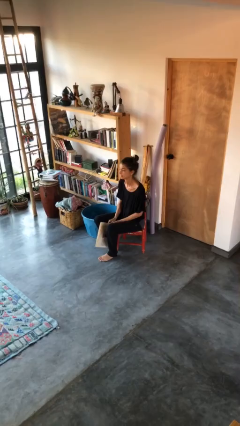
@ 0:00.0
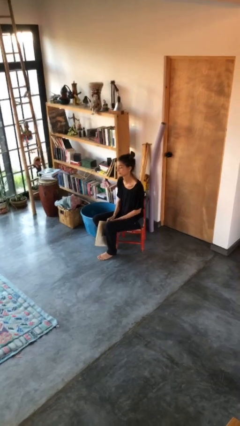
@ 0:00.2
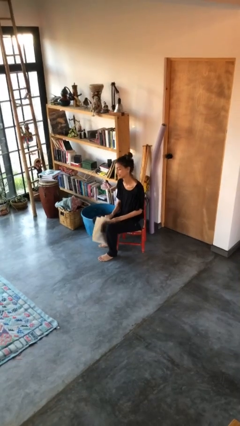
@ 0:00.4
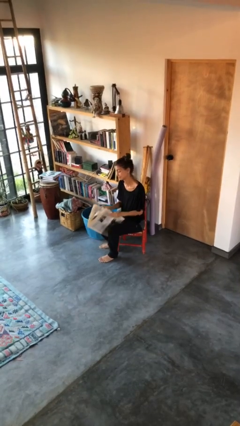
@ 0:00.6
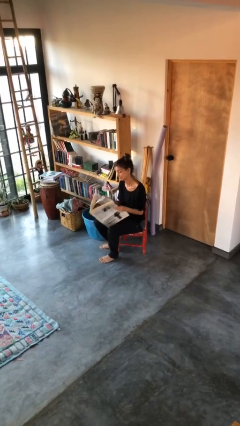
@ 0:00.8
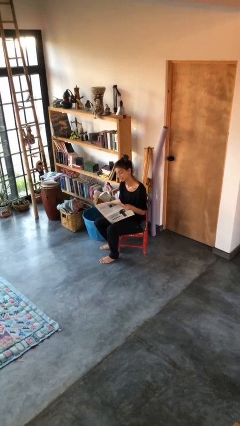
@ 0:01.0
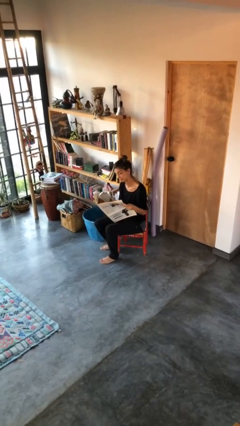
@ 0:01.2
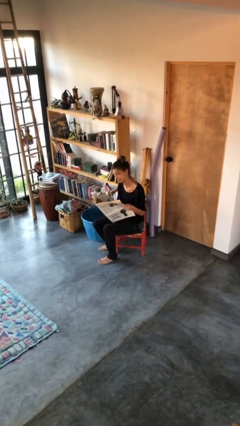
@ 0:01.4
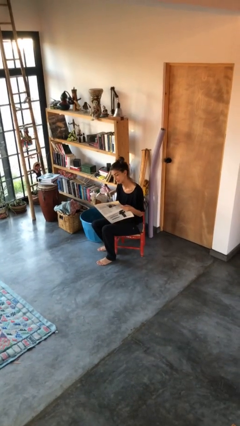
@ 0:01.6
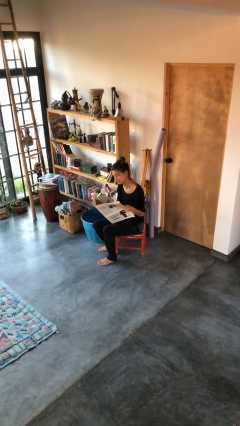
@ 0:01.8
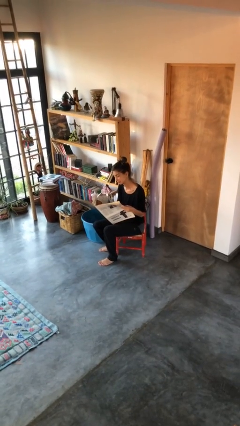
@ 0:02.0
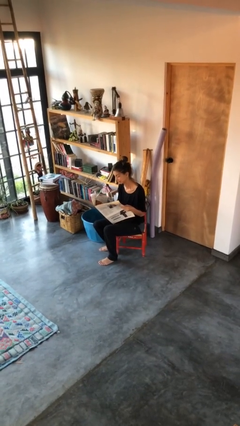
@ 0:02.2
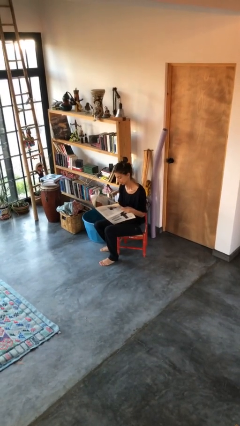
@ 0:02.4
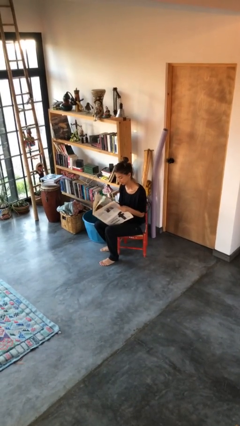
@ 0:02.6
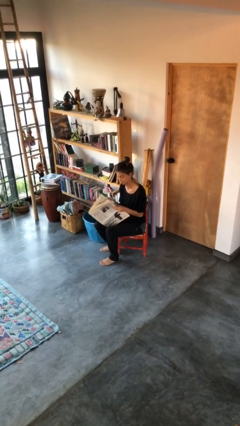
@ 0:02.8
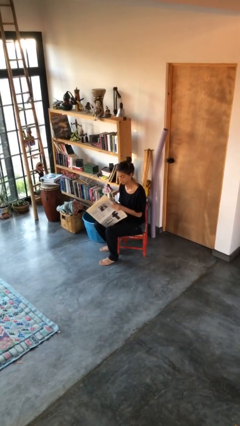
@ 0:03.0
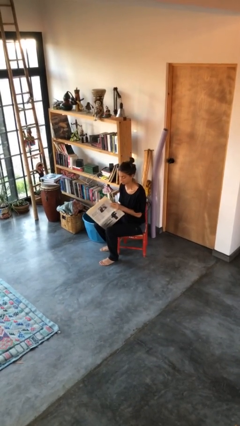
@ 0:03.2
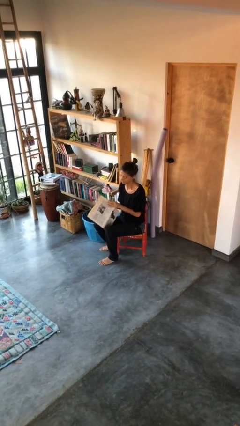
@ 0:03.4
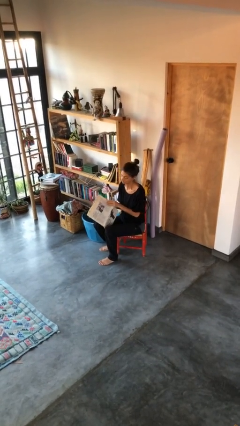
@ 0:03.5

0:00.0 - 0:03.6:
person reads newspaper

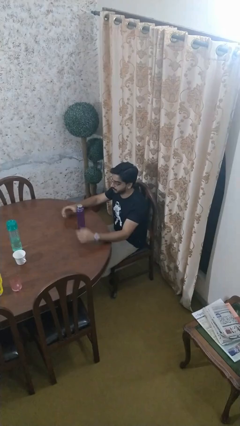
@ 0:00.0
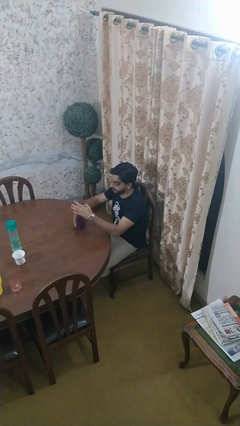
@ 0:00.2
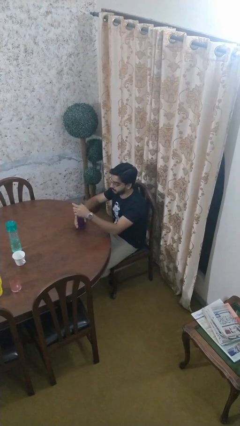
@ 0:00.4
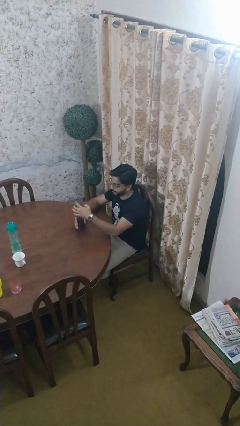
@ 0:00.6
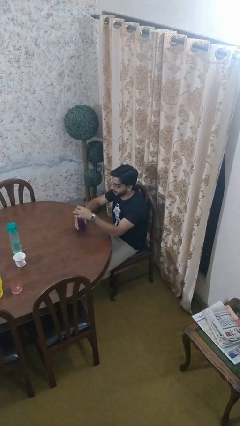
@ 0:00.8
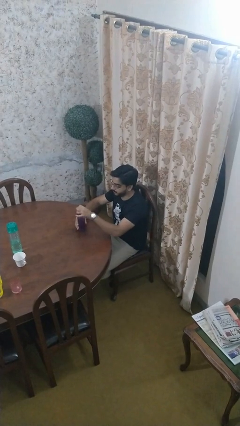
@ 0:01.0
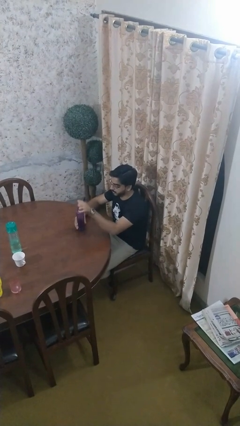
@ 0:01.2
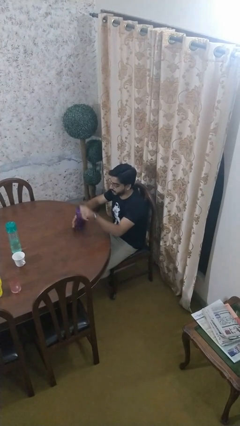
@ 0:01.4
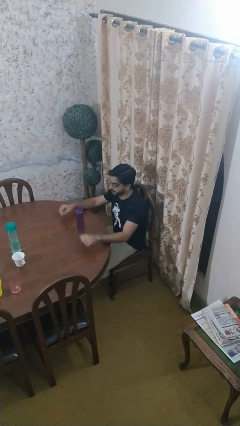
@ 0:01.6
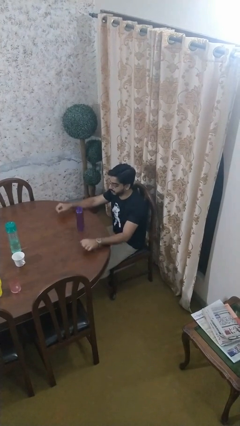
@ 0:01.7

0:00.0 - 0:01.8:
person unscrews lid from bottle

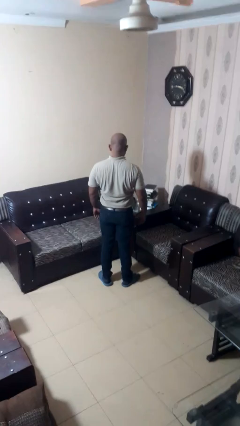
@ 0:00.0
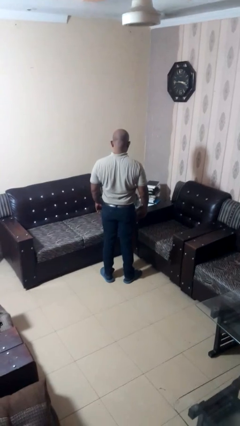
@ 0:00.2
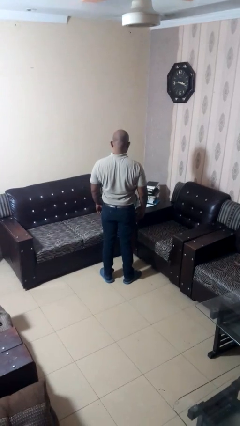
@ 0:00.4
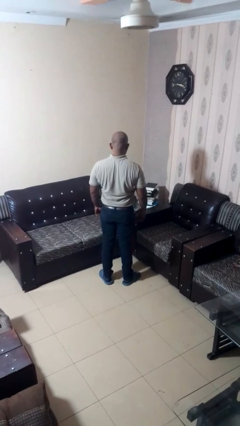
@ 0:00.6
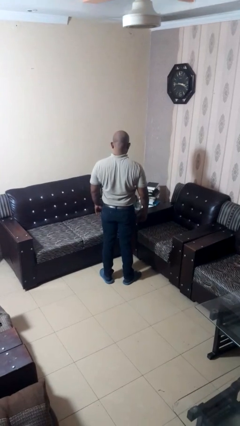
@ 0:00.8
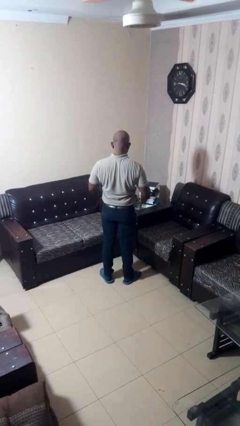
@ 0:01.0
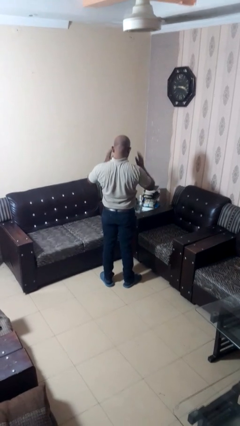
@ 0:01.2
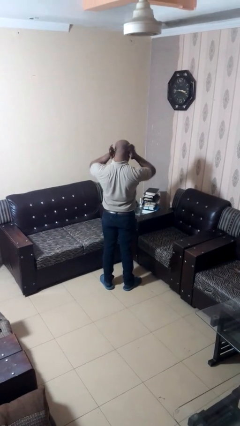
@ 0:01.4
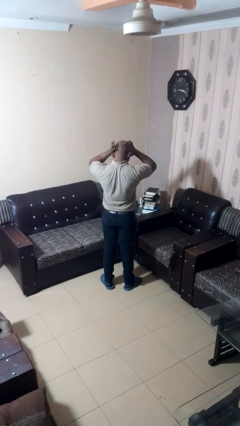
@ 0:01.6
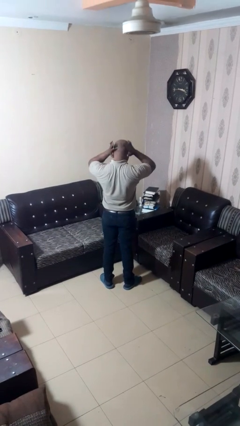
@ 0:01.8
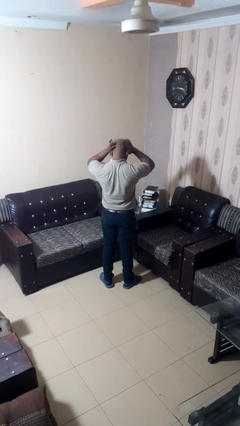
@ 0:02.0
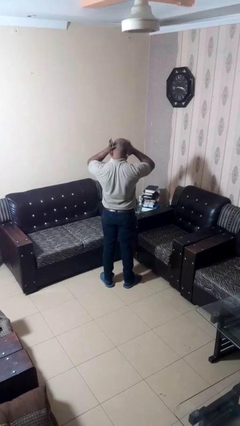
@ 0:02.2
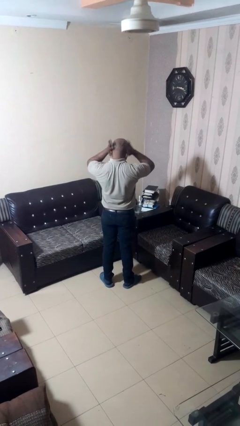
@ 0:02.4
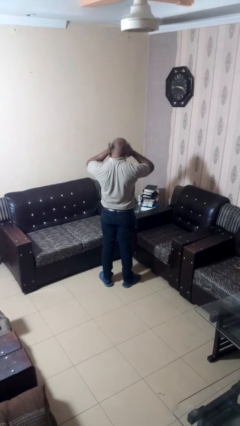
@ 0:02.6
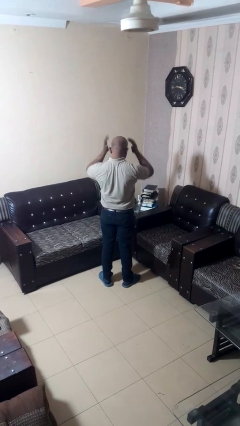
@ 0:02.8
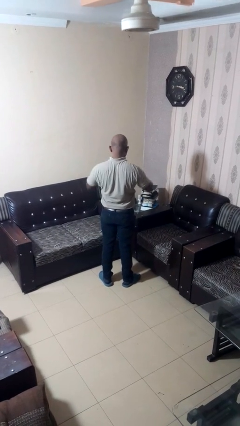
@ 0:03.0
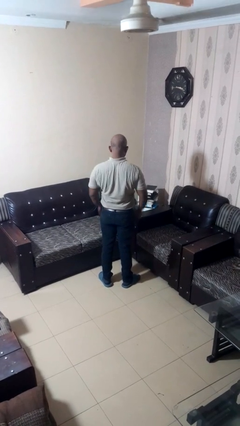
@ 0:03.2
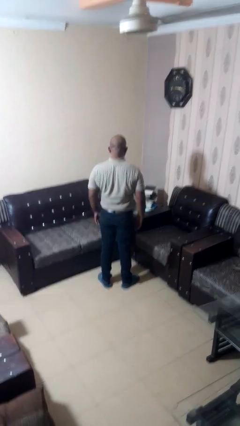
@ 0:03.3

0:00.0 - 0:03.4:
person touches earlobe

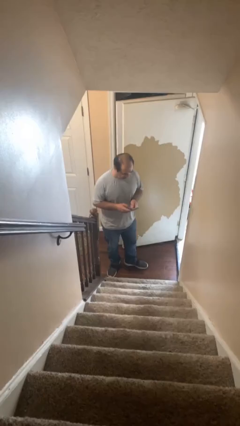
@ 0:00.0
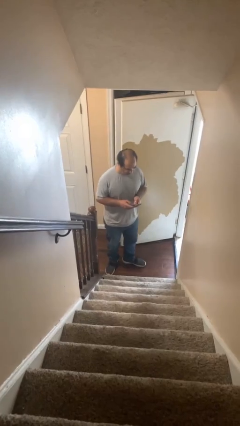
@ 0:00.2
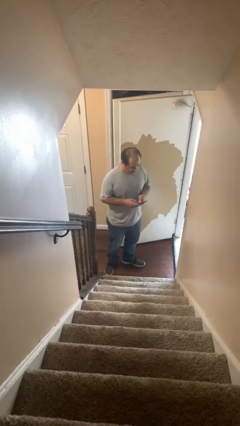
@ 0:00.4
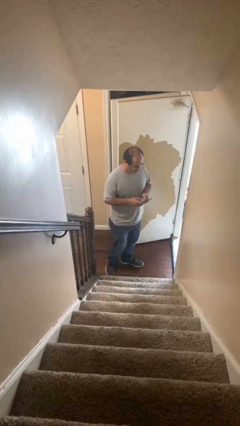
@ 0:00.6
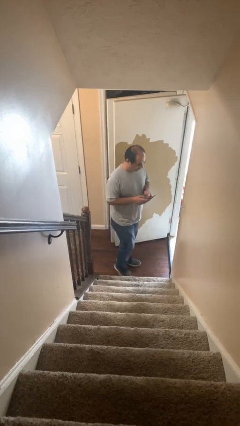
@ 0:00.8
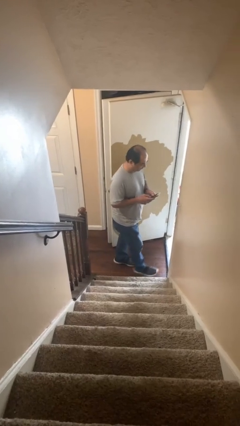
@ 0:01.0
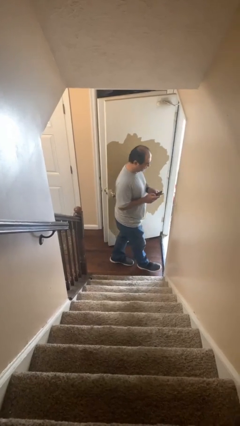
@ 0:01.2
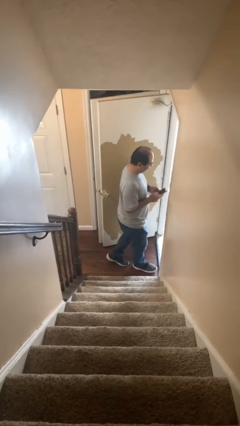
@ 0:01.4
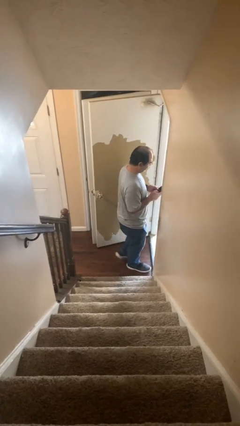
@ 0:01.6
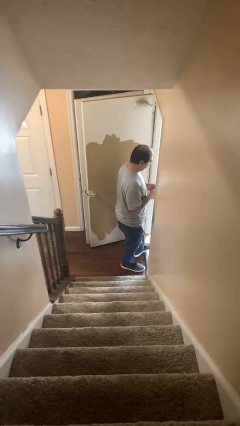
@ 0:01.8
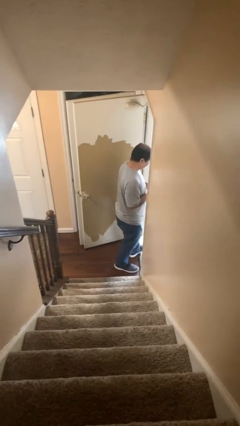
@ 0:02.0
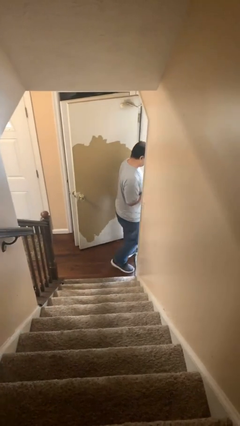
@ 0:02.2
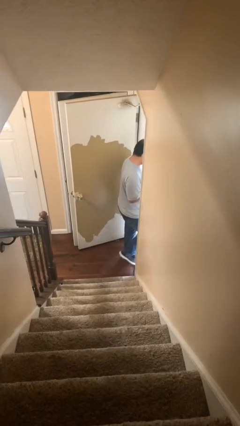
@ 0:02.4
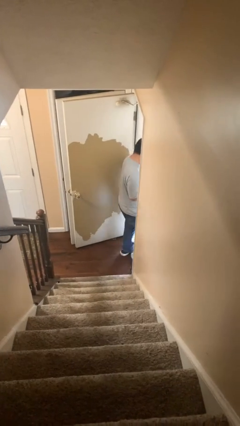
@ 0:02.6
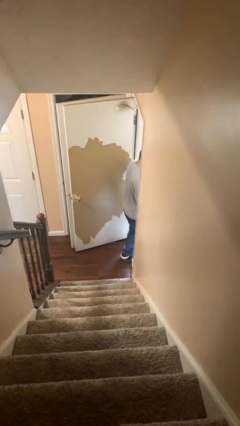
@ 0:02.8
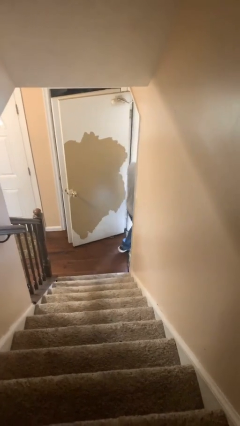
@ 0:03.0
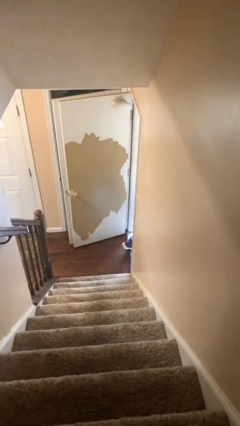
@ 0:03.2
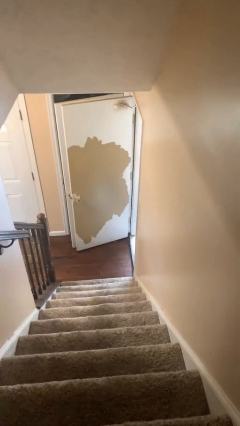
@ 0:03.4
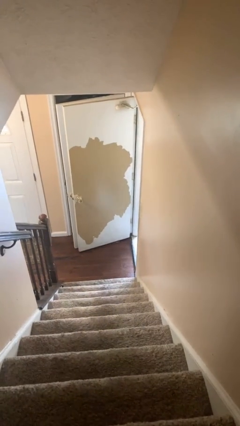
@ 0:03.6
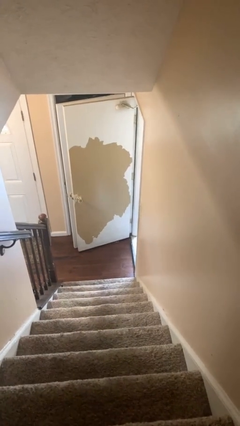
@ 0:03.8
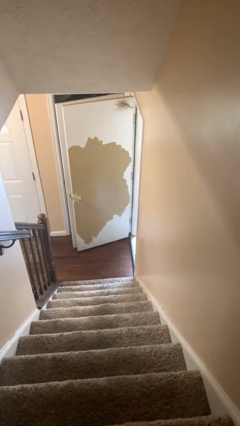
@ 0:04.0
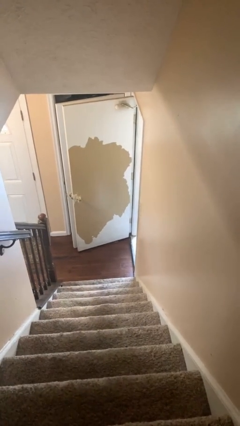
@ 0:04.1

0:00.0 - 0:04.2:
person exits scene through structure

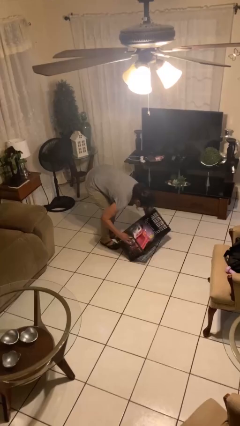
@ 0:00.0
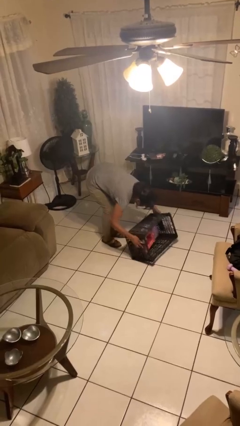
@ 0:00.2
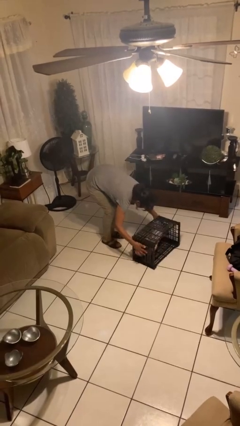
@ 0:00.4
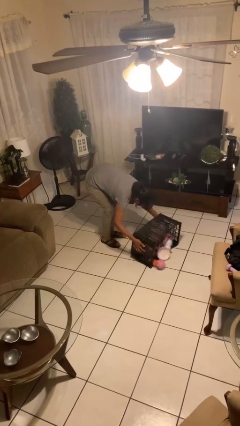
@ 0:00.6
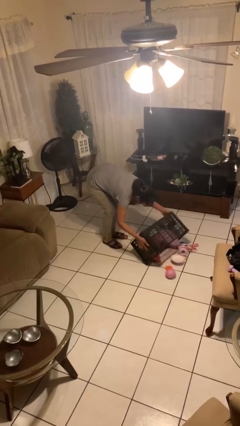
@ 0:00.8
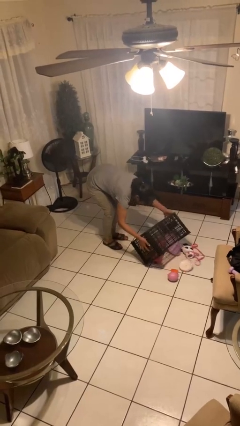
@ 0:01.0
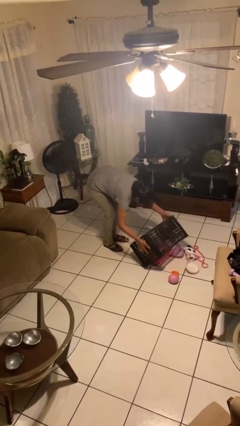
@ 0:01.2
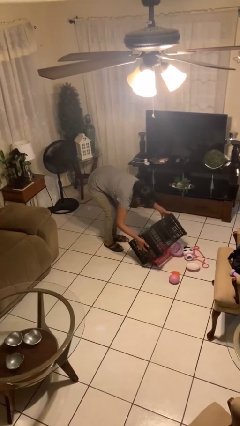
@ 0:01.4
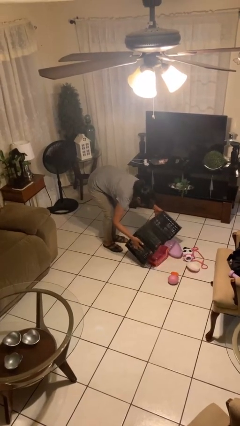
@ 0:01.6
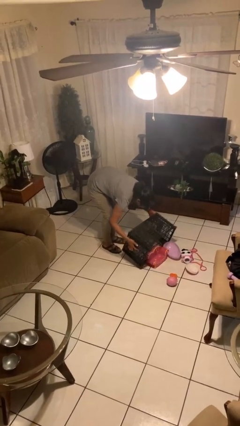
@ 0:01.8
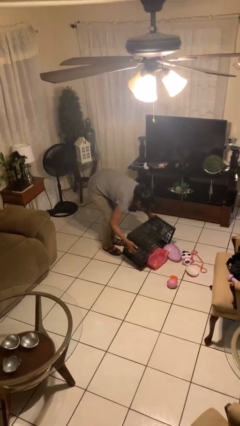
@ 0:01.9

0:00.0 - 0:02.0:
person unloads box onto floor

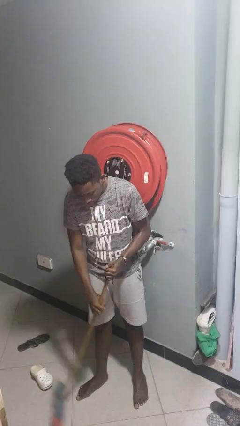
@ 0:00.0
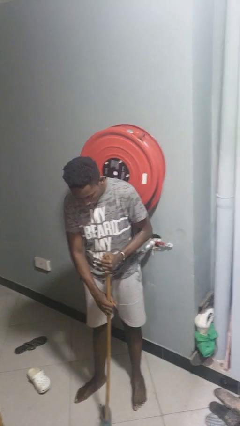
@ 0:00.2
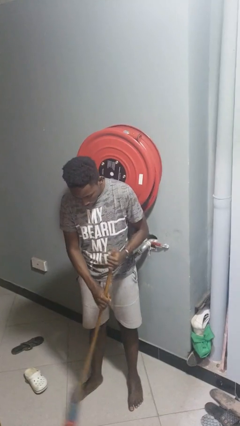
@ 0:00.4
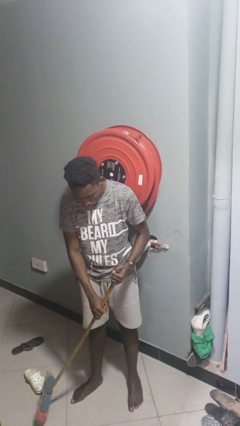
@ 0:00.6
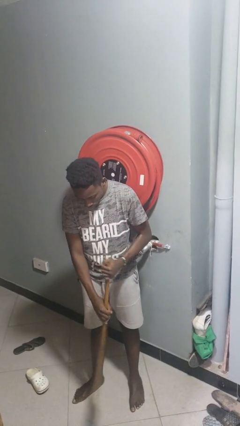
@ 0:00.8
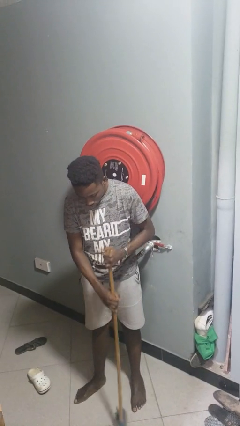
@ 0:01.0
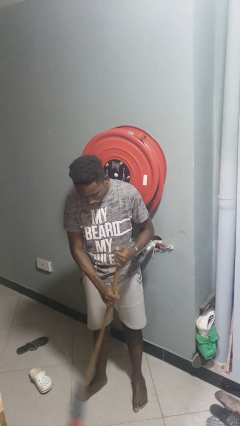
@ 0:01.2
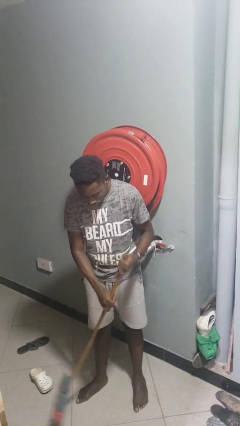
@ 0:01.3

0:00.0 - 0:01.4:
person sweeps floor

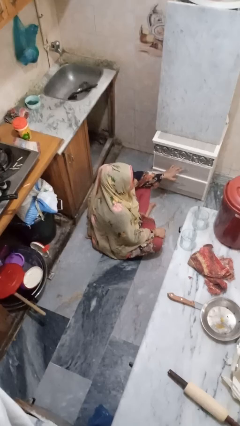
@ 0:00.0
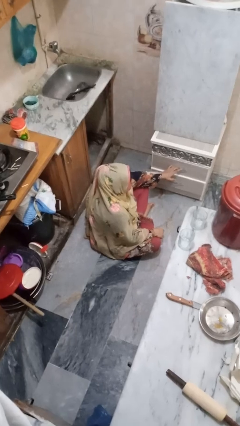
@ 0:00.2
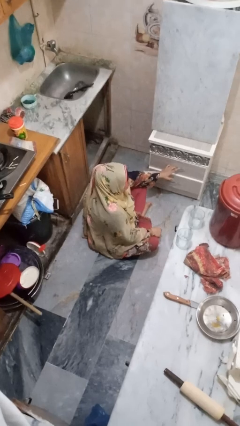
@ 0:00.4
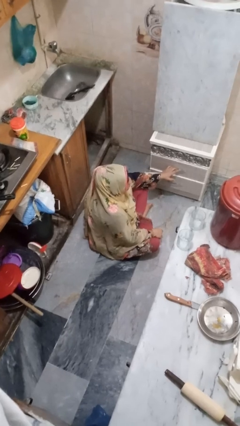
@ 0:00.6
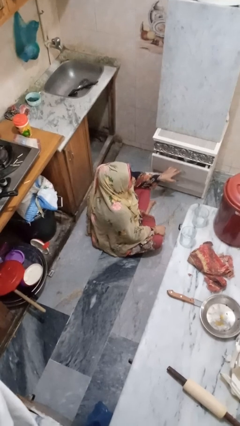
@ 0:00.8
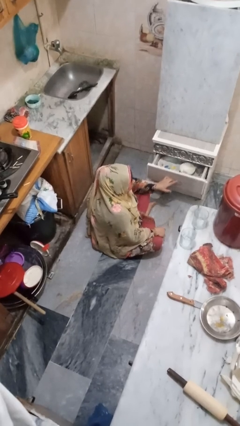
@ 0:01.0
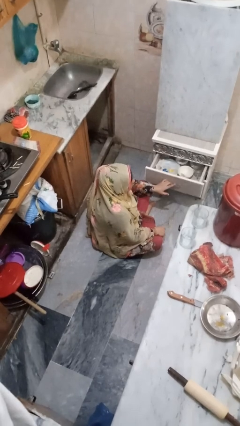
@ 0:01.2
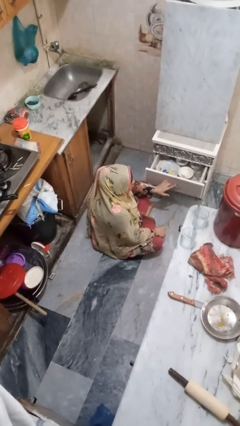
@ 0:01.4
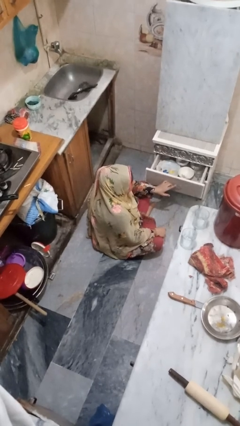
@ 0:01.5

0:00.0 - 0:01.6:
person opens kitchen drawer
